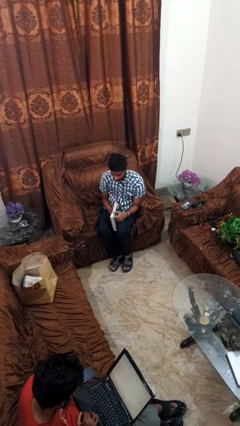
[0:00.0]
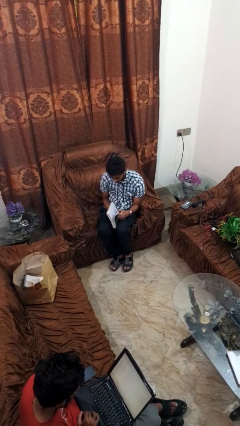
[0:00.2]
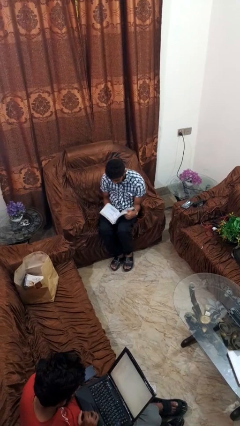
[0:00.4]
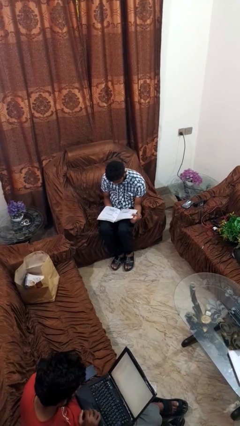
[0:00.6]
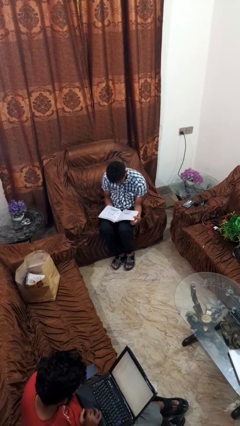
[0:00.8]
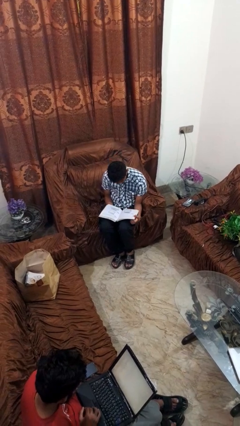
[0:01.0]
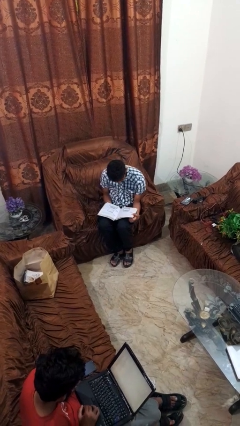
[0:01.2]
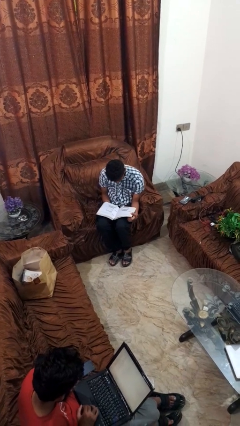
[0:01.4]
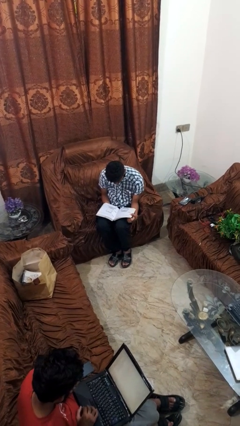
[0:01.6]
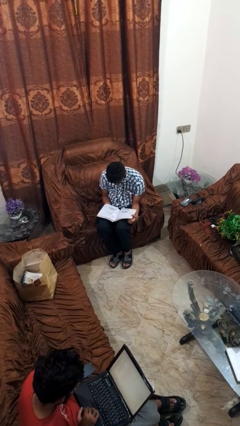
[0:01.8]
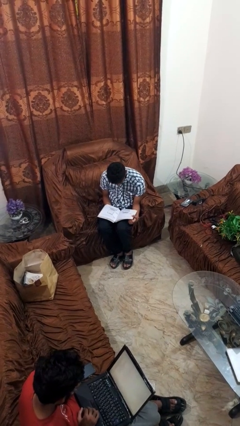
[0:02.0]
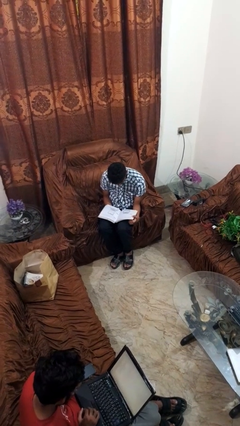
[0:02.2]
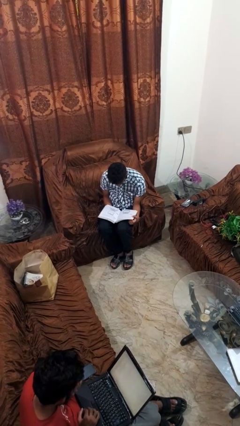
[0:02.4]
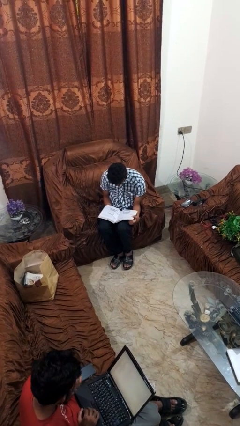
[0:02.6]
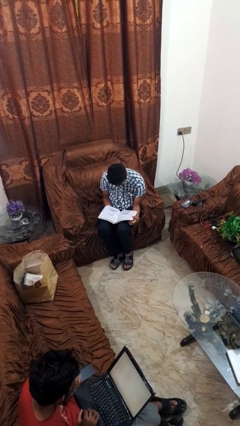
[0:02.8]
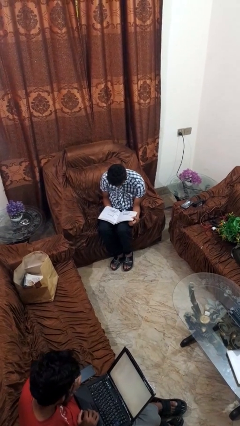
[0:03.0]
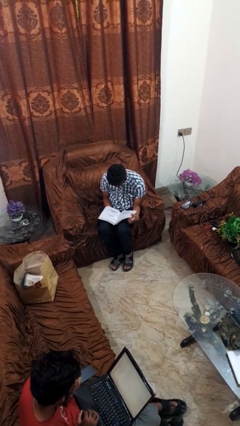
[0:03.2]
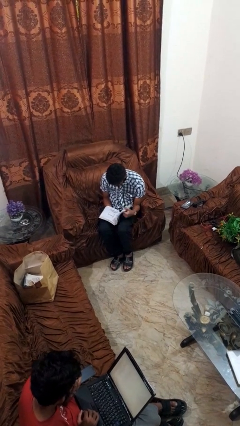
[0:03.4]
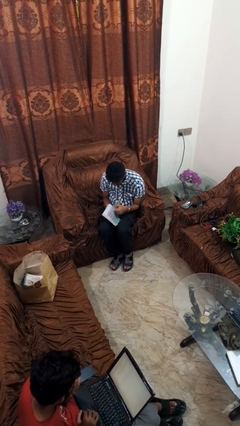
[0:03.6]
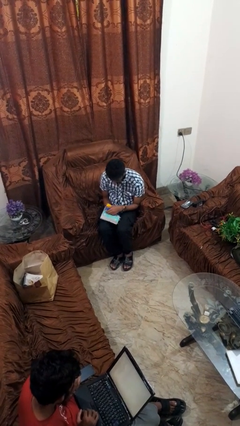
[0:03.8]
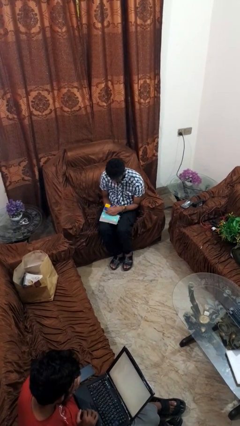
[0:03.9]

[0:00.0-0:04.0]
person reads book

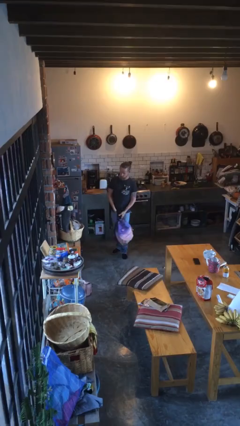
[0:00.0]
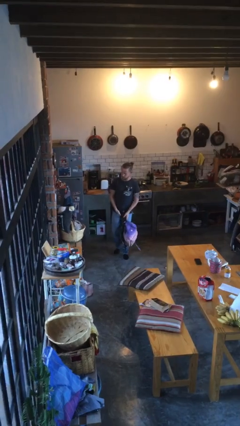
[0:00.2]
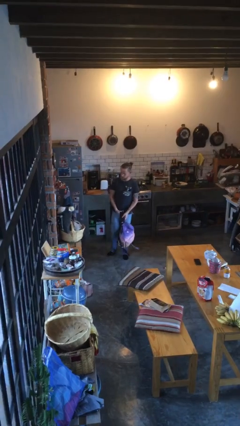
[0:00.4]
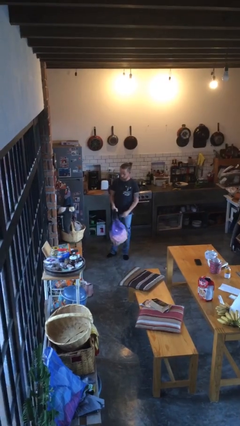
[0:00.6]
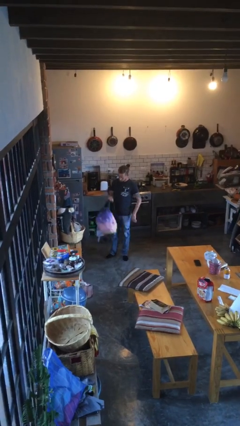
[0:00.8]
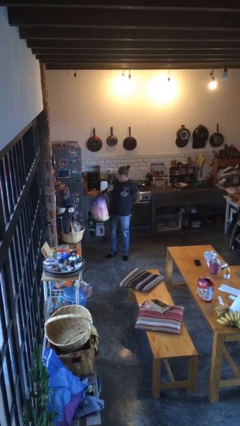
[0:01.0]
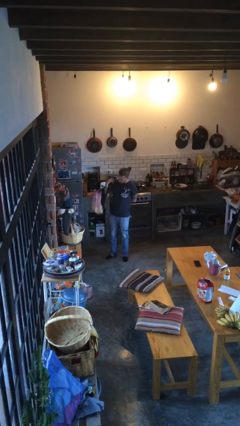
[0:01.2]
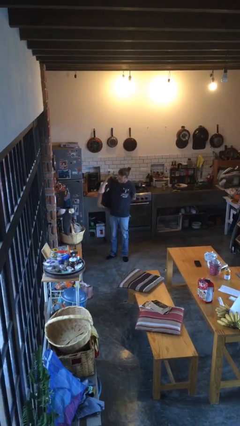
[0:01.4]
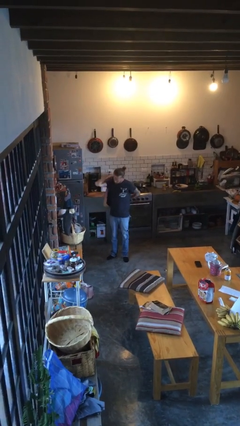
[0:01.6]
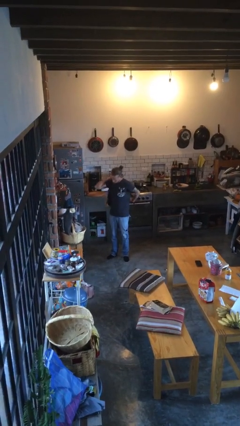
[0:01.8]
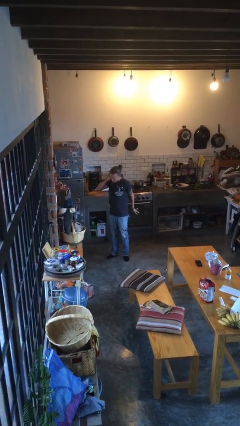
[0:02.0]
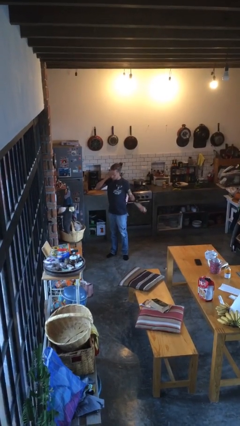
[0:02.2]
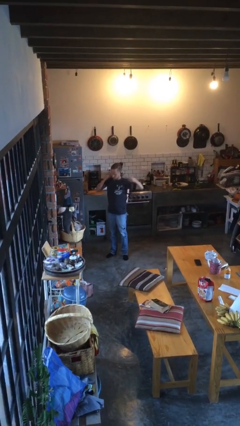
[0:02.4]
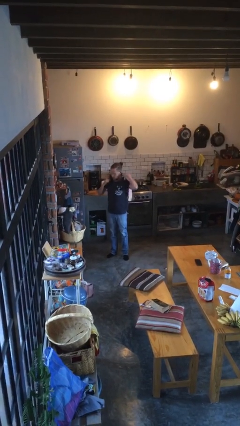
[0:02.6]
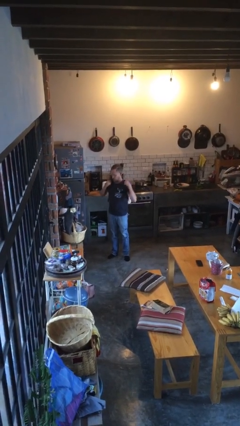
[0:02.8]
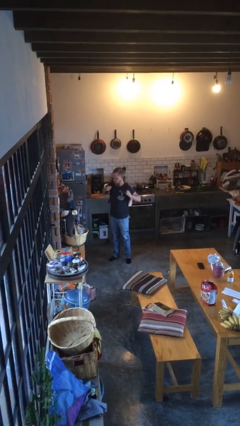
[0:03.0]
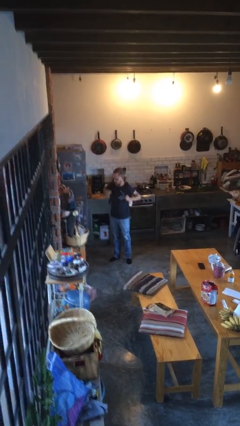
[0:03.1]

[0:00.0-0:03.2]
person puts on backpack

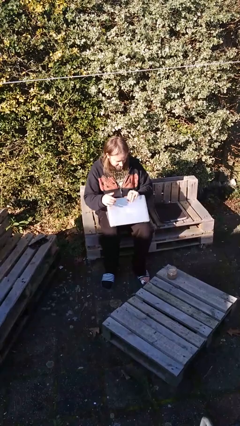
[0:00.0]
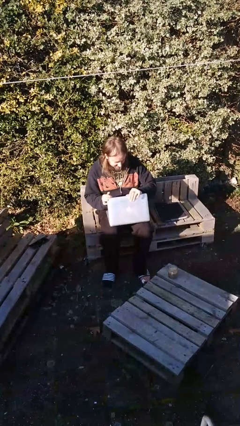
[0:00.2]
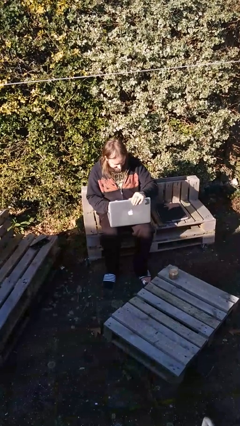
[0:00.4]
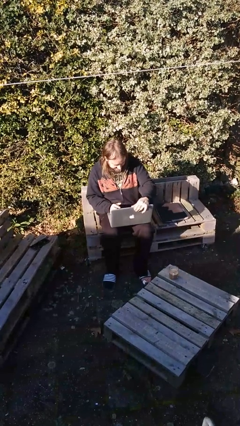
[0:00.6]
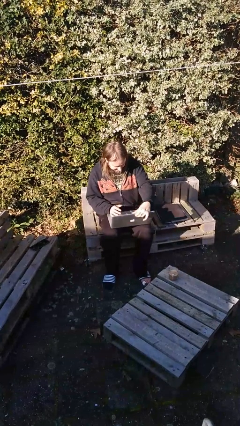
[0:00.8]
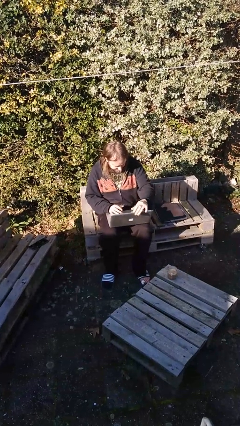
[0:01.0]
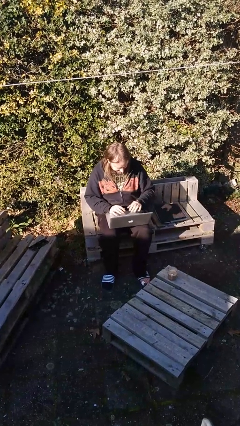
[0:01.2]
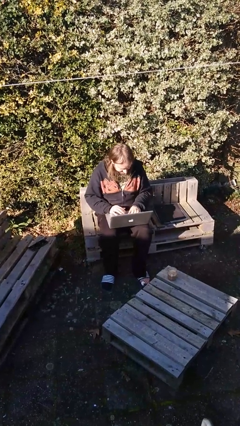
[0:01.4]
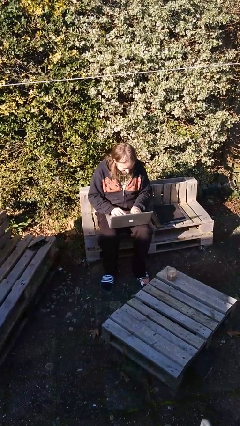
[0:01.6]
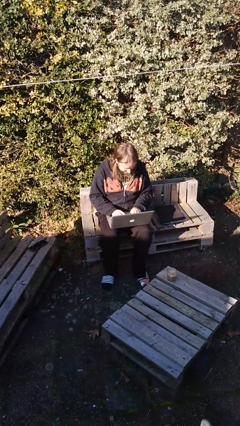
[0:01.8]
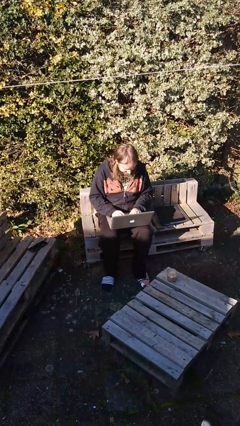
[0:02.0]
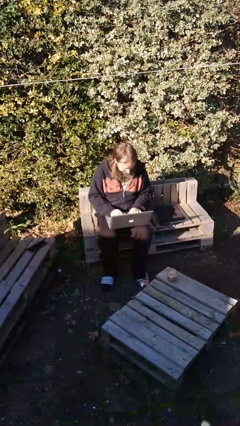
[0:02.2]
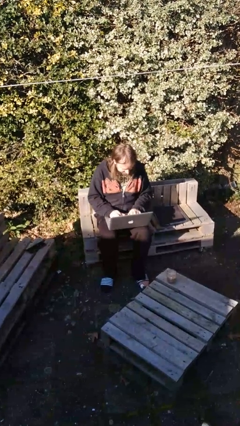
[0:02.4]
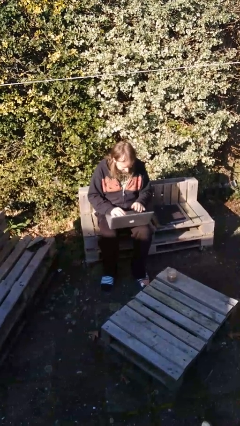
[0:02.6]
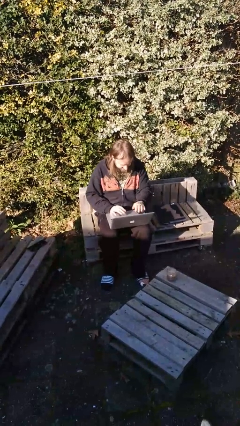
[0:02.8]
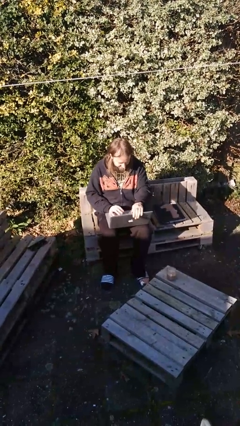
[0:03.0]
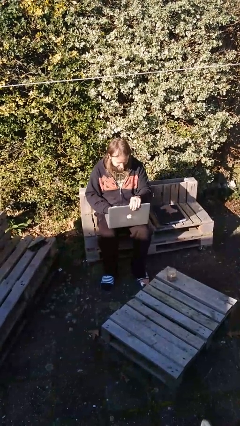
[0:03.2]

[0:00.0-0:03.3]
person interacts with laptop

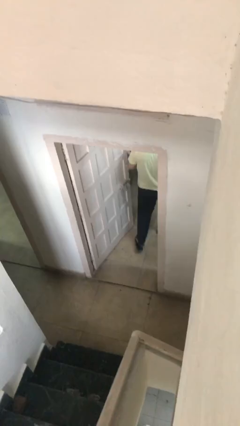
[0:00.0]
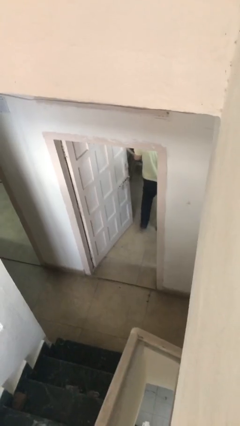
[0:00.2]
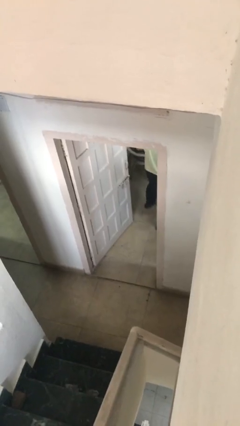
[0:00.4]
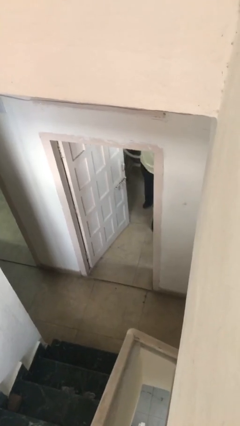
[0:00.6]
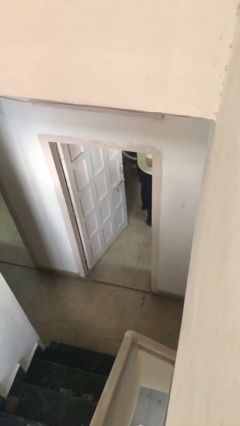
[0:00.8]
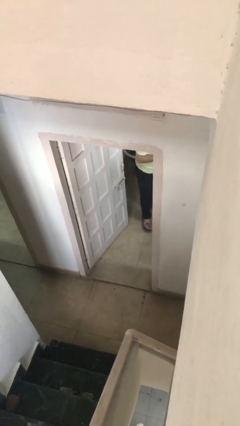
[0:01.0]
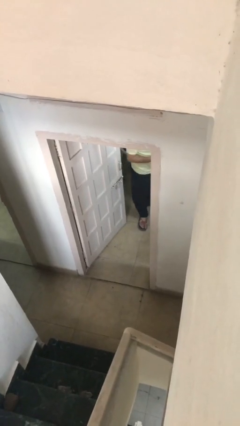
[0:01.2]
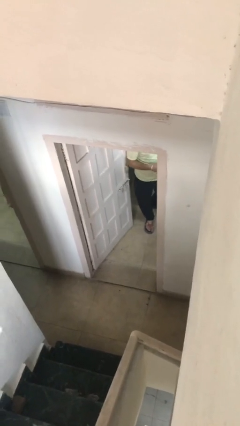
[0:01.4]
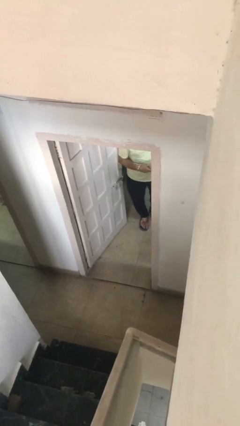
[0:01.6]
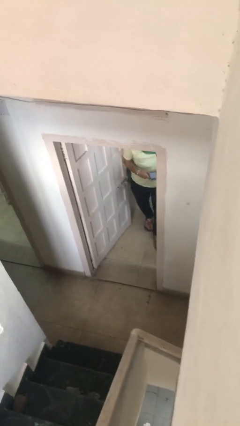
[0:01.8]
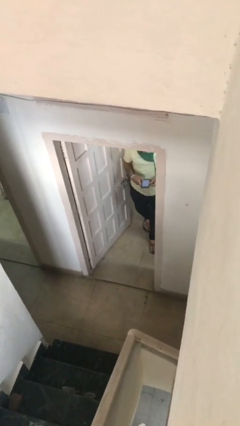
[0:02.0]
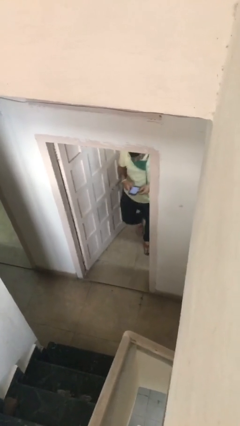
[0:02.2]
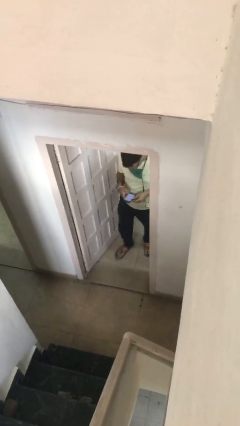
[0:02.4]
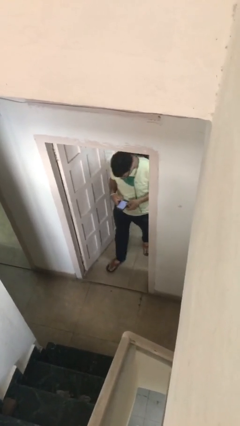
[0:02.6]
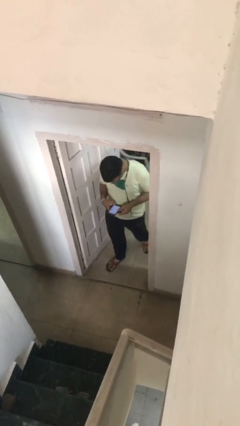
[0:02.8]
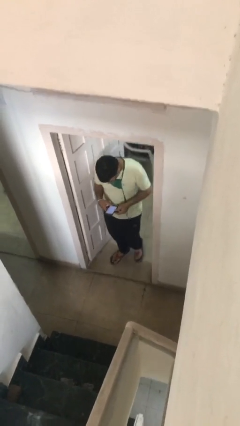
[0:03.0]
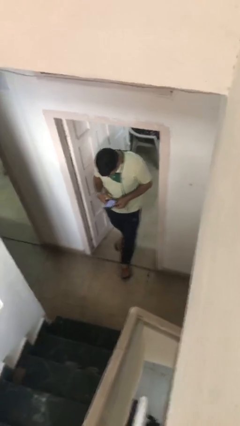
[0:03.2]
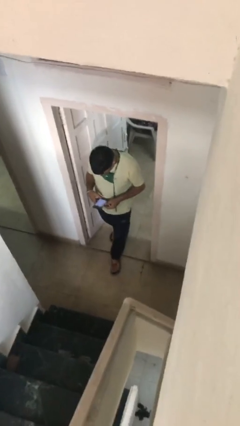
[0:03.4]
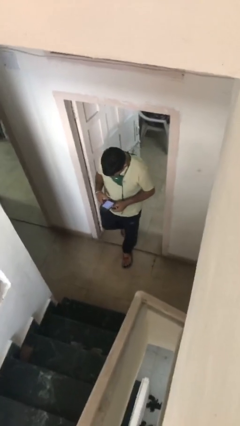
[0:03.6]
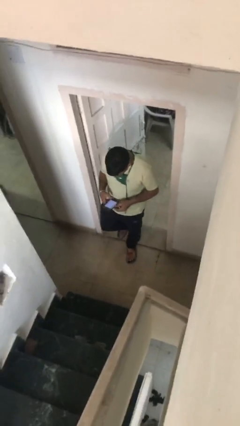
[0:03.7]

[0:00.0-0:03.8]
person enters scene through structure

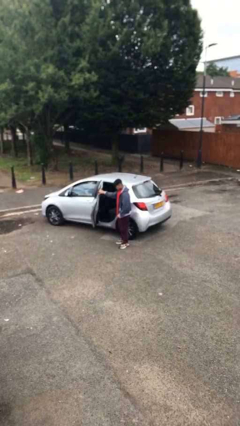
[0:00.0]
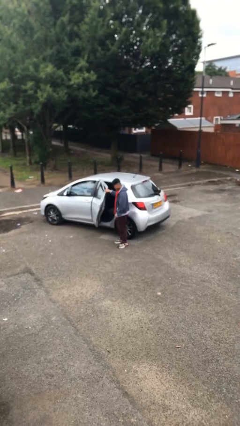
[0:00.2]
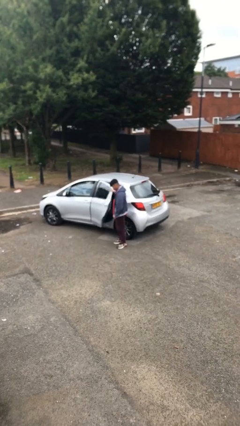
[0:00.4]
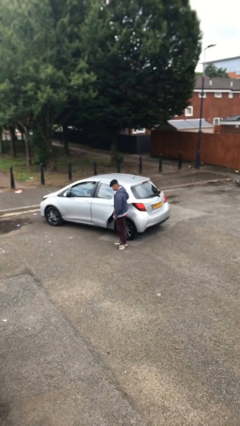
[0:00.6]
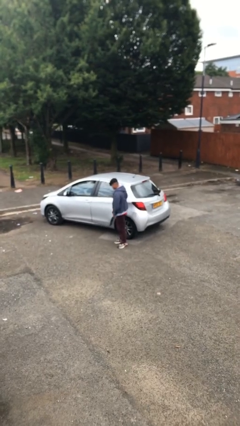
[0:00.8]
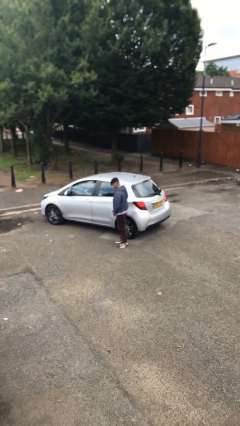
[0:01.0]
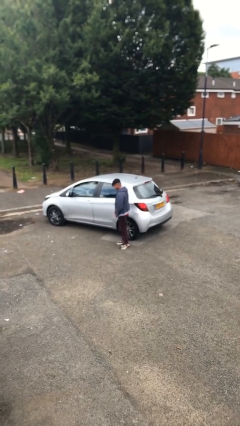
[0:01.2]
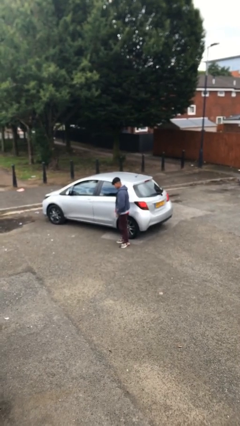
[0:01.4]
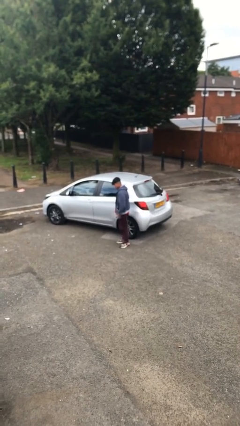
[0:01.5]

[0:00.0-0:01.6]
person closes car door

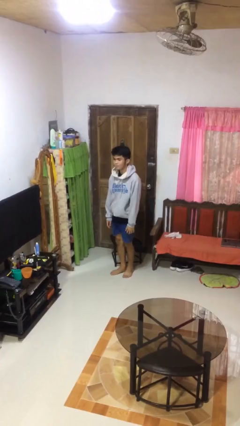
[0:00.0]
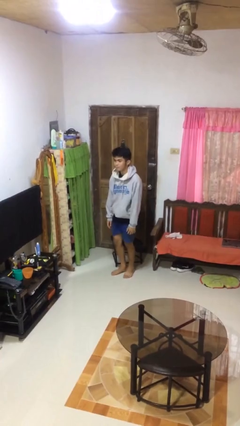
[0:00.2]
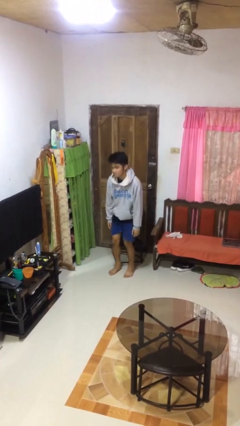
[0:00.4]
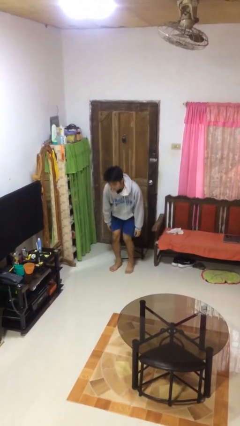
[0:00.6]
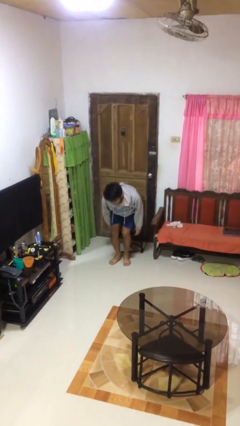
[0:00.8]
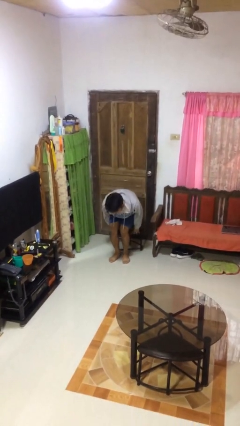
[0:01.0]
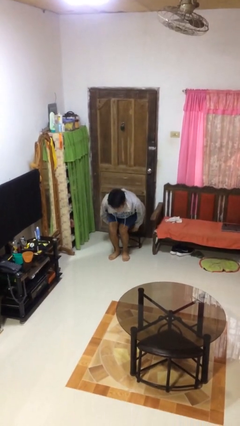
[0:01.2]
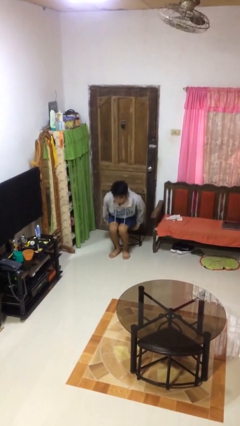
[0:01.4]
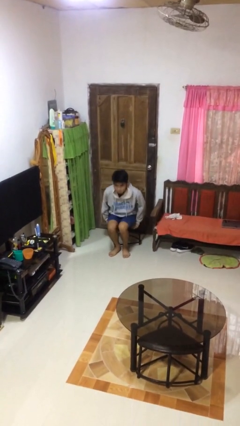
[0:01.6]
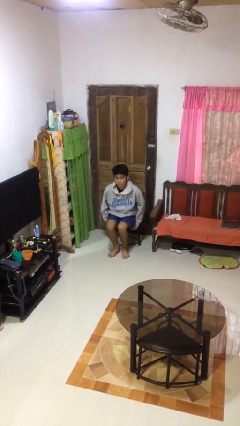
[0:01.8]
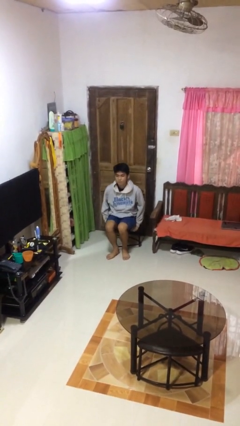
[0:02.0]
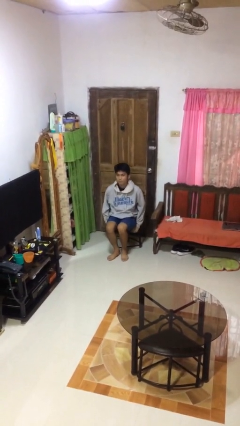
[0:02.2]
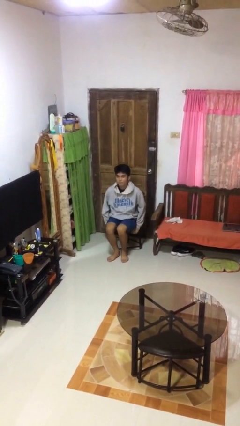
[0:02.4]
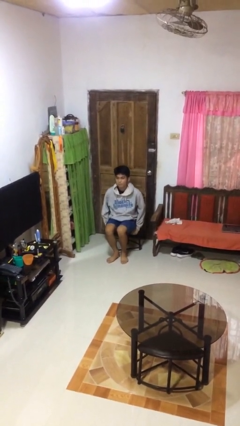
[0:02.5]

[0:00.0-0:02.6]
person sits down
